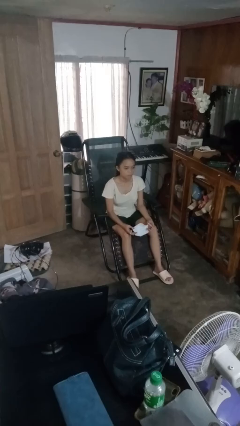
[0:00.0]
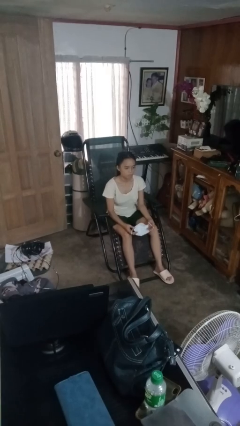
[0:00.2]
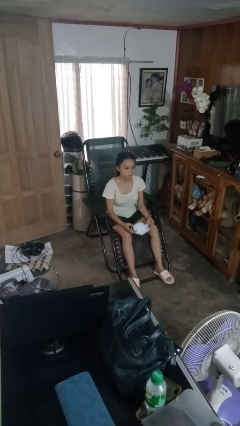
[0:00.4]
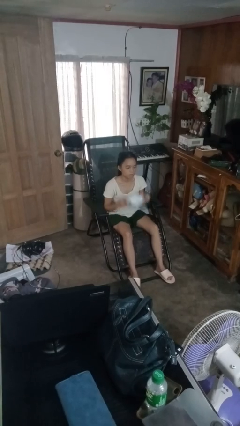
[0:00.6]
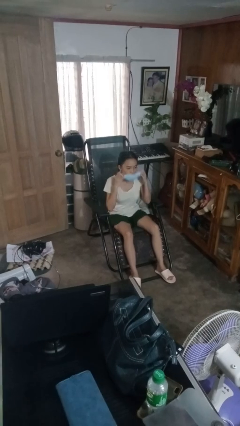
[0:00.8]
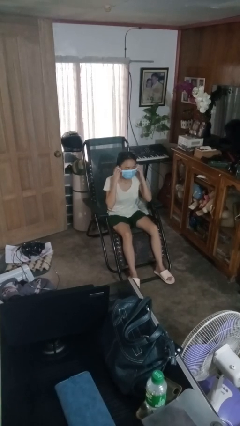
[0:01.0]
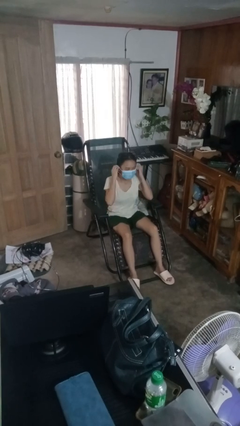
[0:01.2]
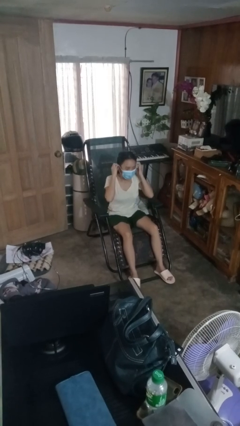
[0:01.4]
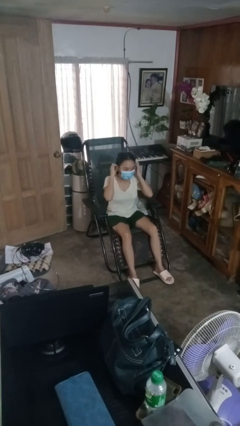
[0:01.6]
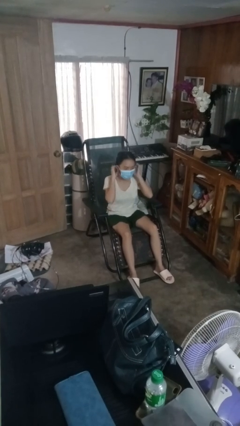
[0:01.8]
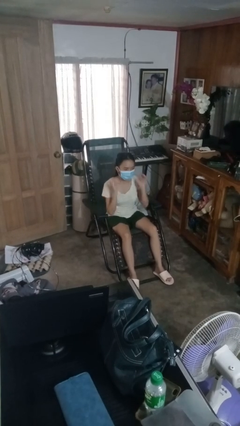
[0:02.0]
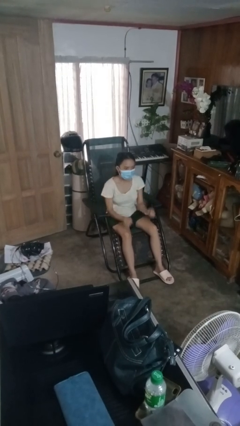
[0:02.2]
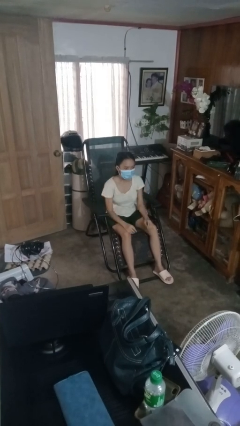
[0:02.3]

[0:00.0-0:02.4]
person puts on facemask

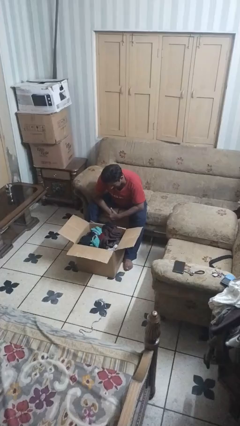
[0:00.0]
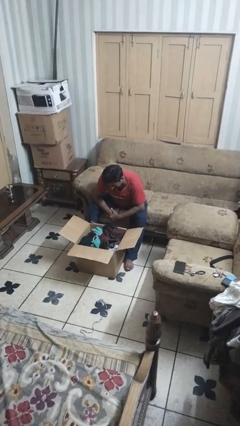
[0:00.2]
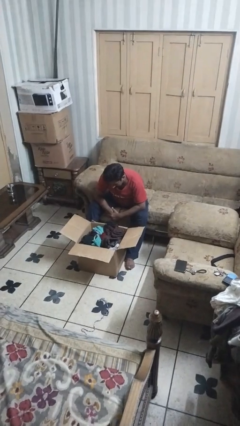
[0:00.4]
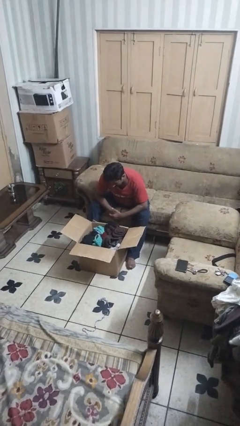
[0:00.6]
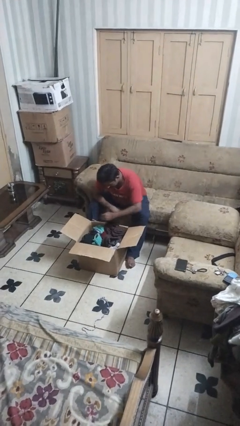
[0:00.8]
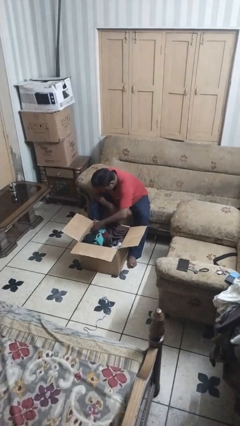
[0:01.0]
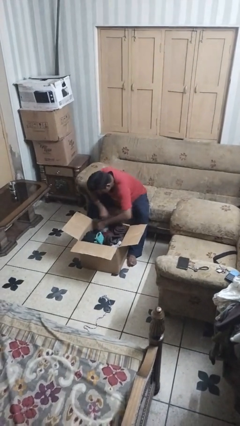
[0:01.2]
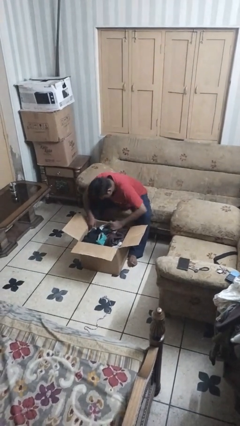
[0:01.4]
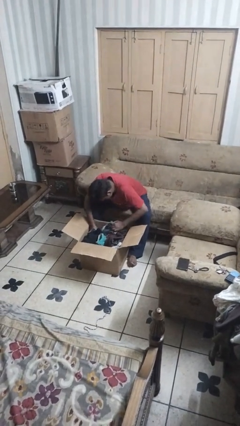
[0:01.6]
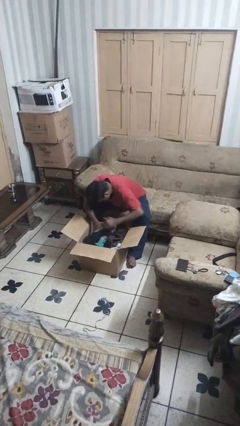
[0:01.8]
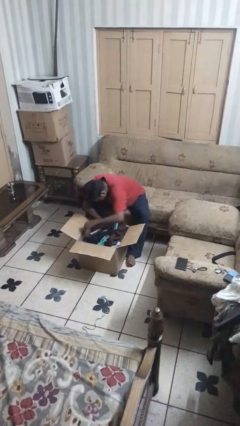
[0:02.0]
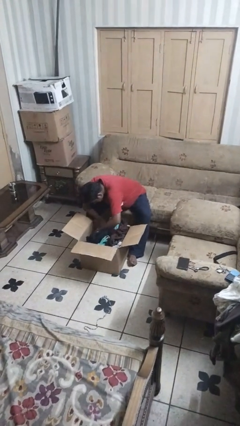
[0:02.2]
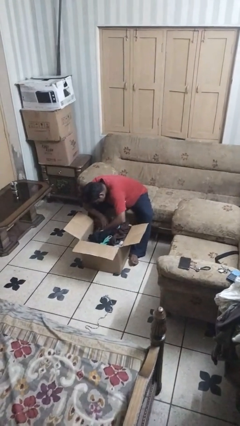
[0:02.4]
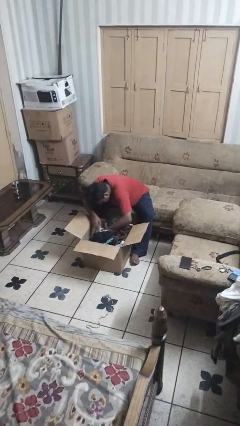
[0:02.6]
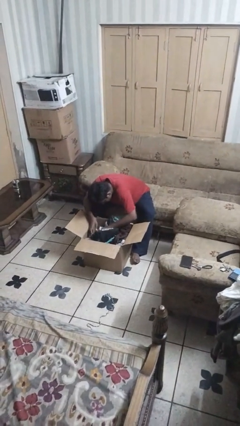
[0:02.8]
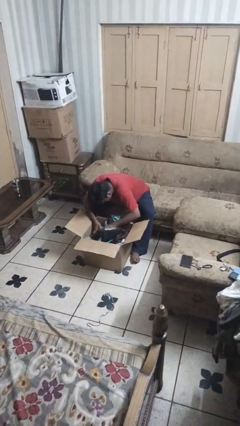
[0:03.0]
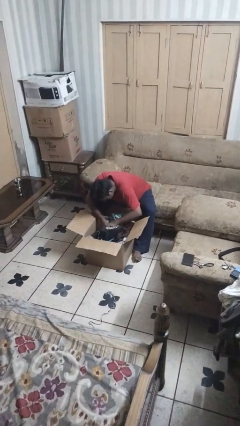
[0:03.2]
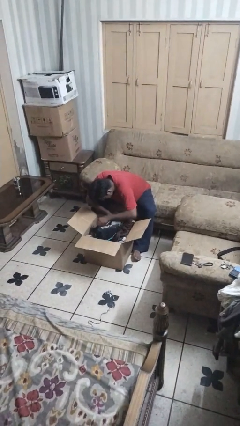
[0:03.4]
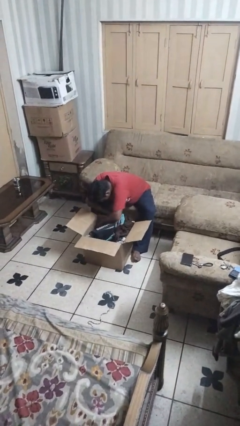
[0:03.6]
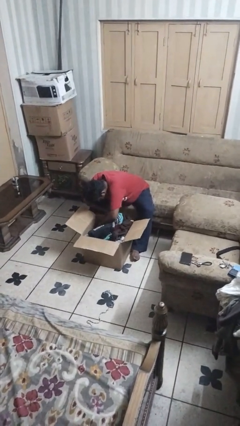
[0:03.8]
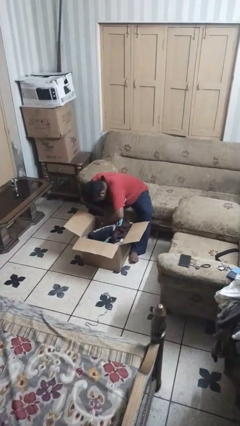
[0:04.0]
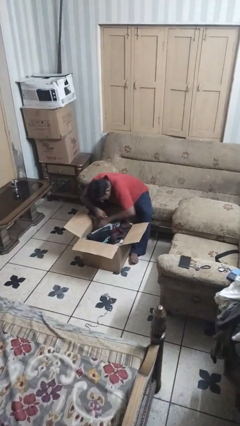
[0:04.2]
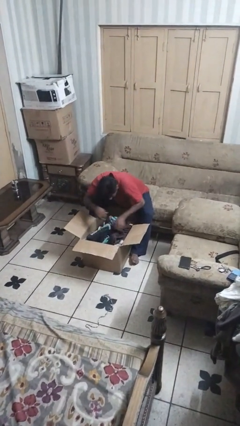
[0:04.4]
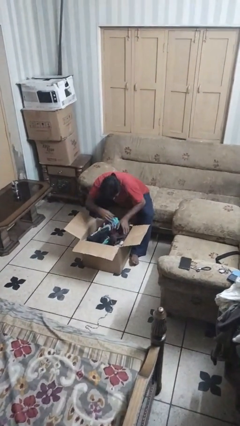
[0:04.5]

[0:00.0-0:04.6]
person searches in box

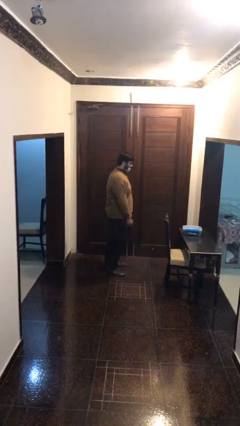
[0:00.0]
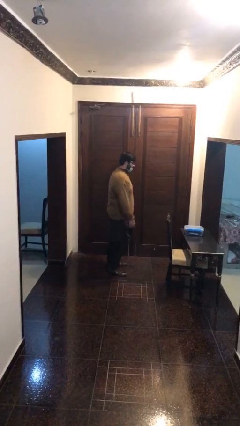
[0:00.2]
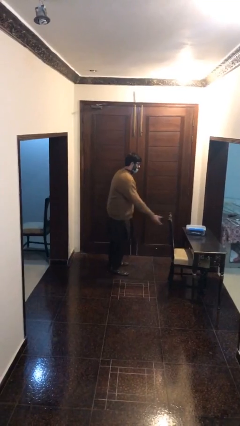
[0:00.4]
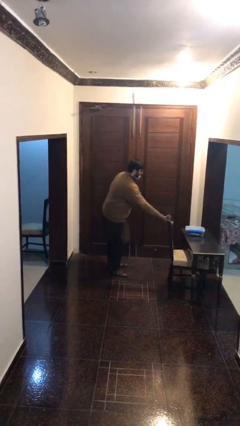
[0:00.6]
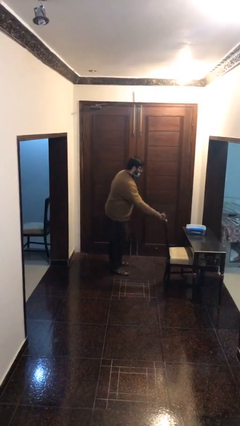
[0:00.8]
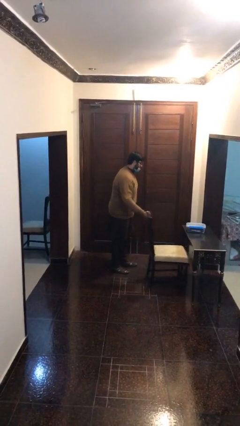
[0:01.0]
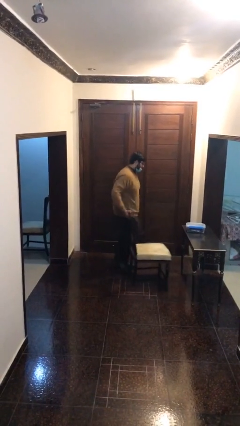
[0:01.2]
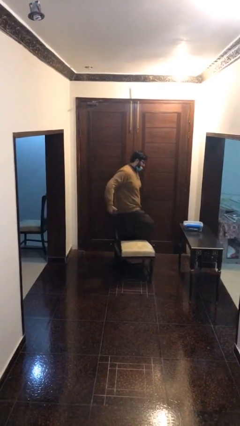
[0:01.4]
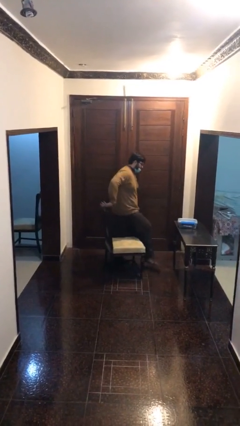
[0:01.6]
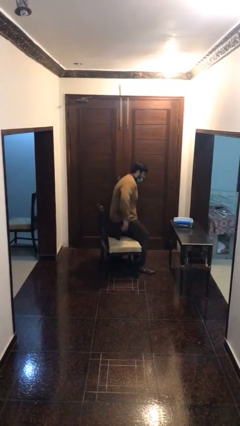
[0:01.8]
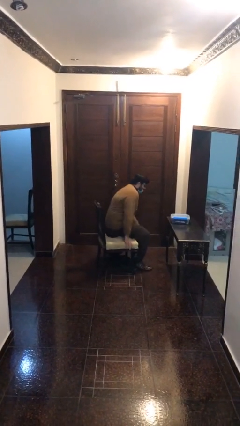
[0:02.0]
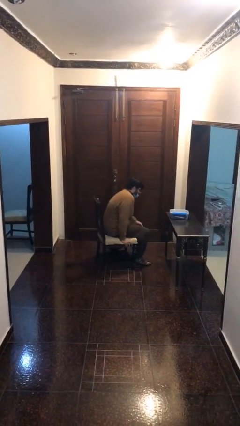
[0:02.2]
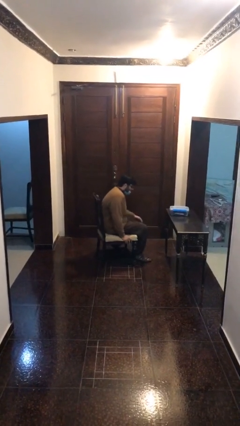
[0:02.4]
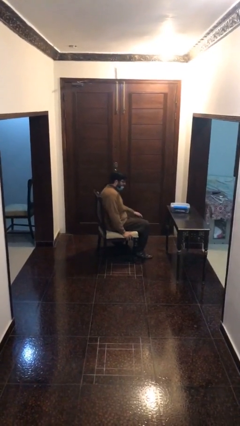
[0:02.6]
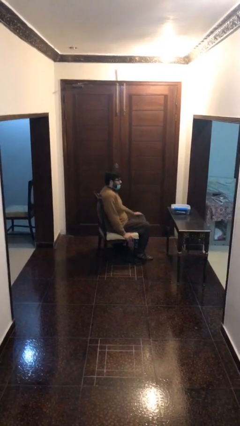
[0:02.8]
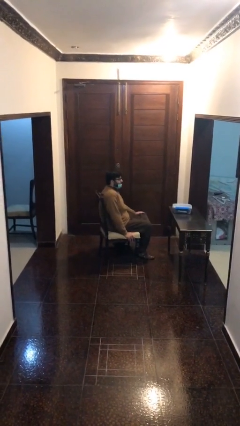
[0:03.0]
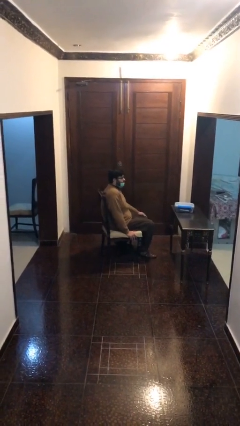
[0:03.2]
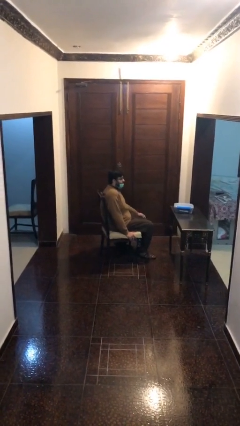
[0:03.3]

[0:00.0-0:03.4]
person sits down

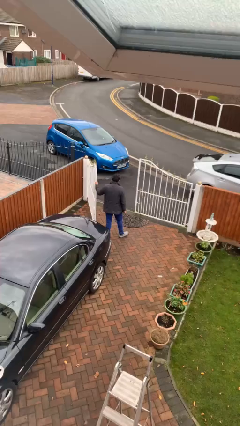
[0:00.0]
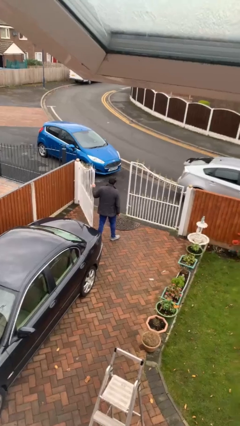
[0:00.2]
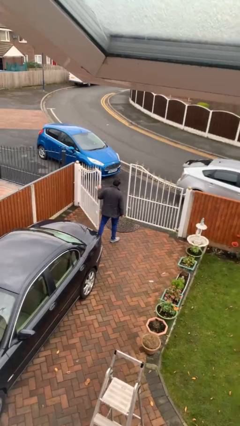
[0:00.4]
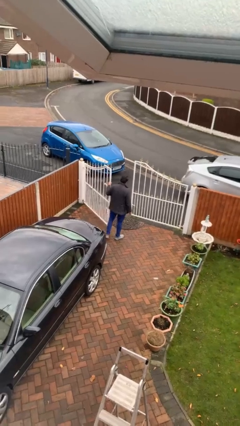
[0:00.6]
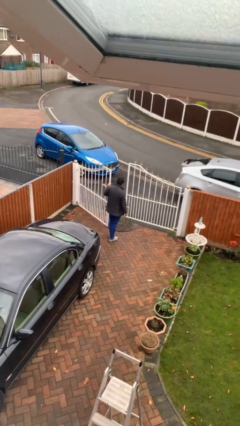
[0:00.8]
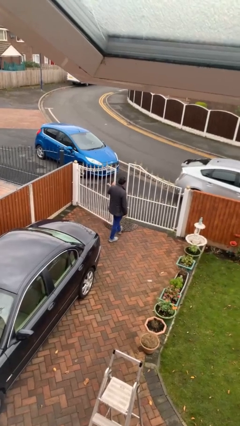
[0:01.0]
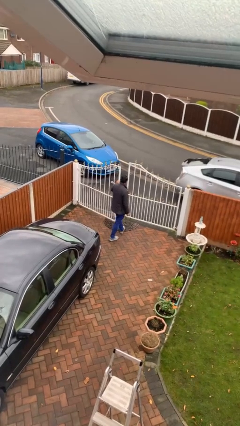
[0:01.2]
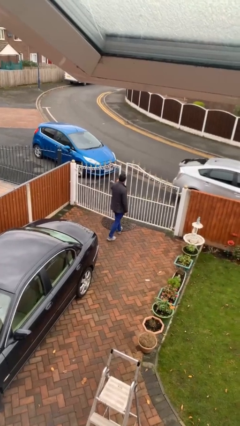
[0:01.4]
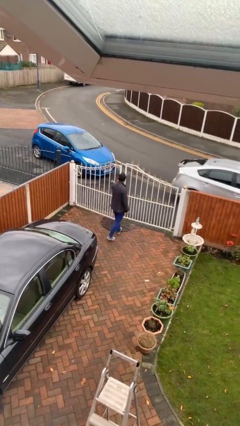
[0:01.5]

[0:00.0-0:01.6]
person closes facility door

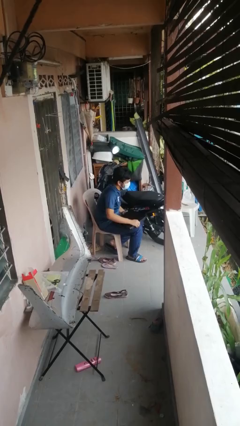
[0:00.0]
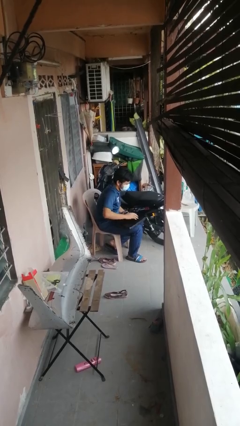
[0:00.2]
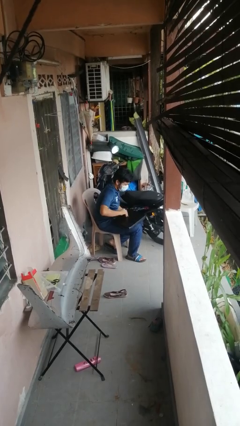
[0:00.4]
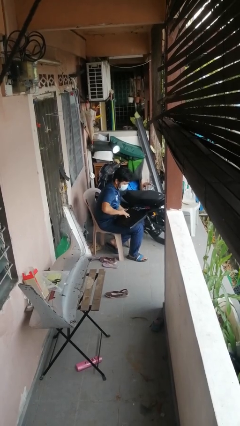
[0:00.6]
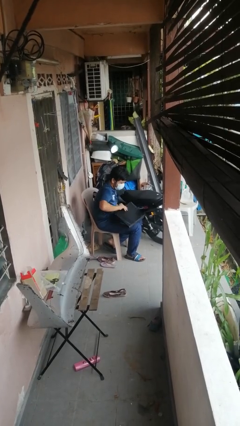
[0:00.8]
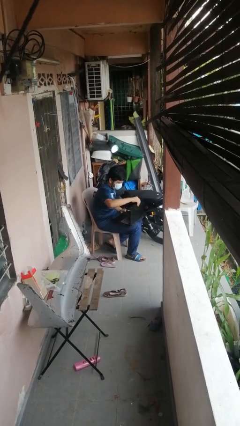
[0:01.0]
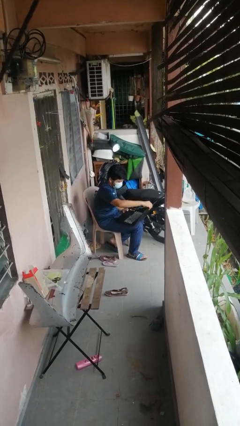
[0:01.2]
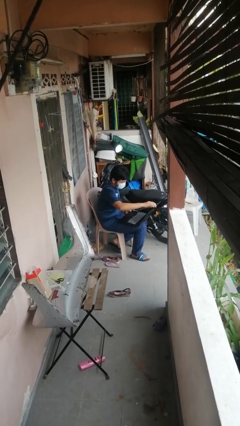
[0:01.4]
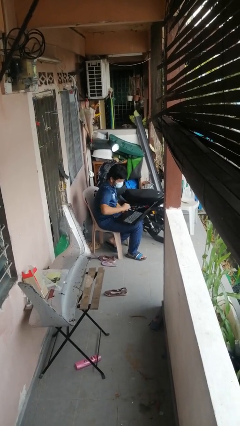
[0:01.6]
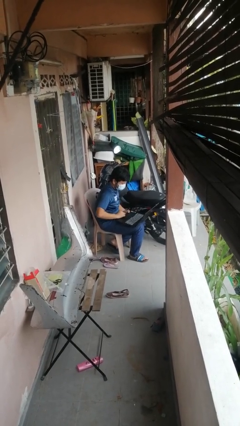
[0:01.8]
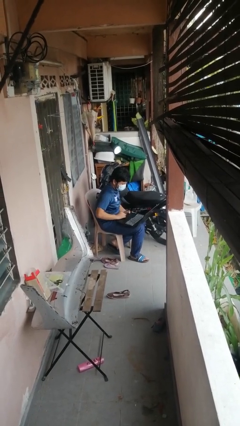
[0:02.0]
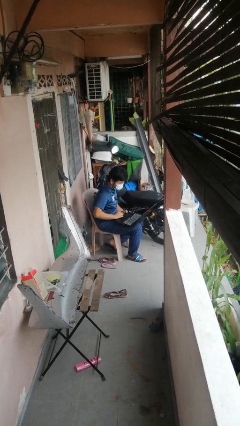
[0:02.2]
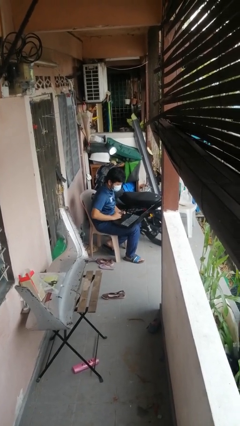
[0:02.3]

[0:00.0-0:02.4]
person opens laptop

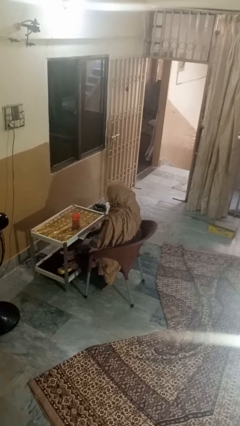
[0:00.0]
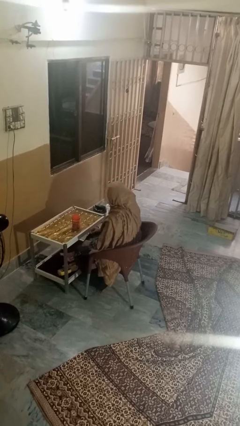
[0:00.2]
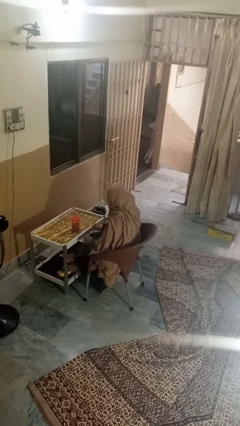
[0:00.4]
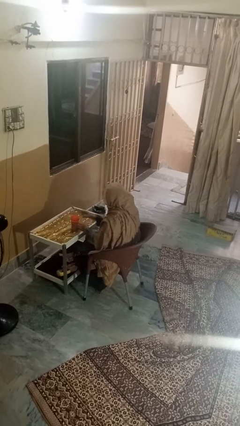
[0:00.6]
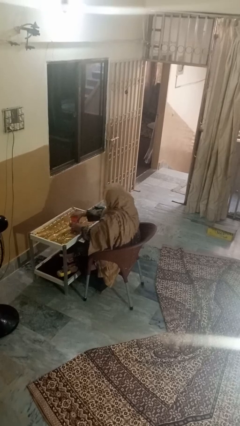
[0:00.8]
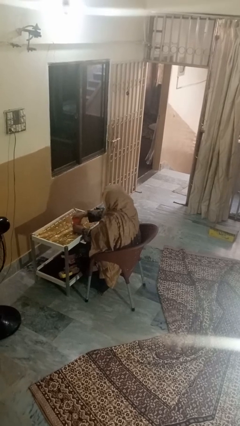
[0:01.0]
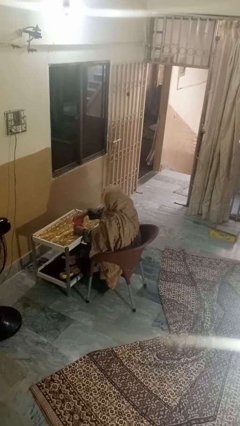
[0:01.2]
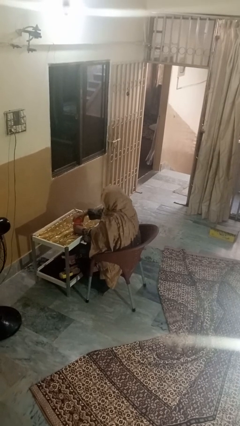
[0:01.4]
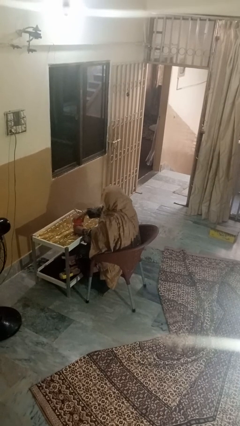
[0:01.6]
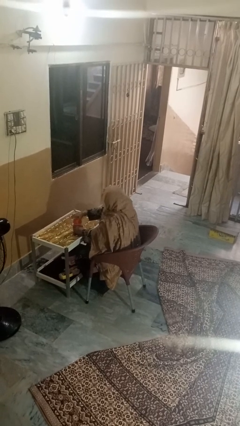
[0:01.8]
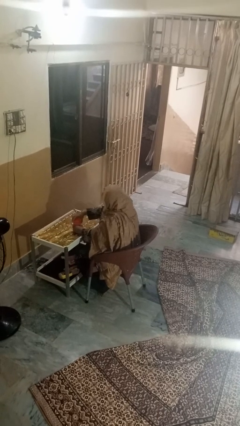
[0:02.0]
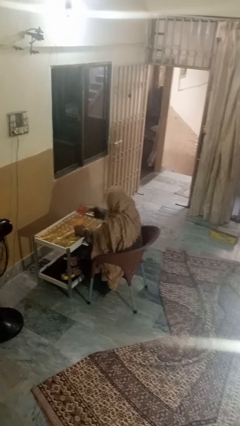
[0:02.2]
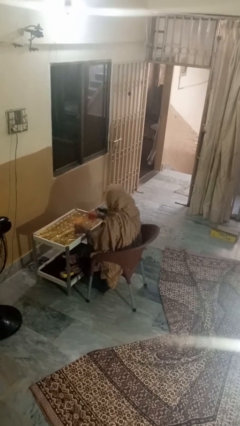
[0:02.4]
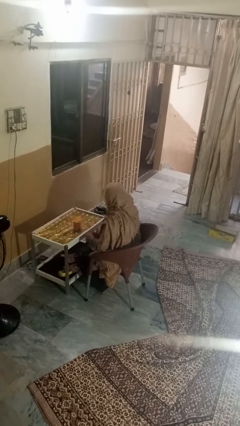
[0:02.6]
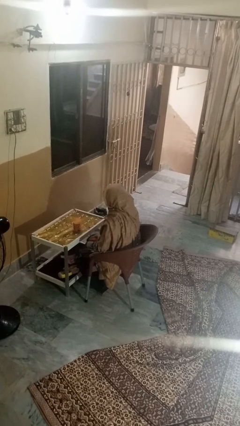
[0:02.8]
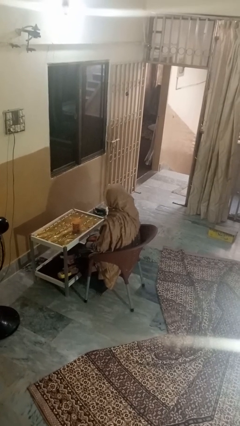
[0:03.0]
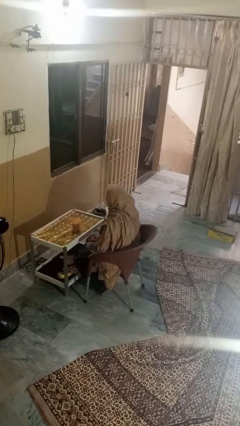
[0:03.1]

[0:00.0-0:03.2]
person opens jar
